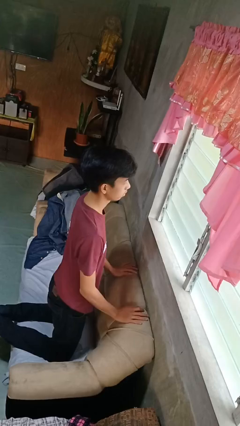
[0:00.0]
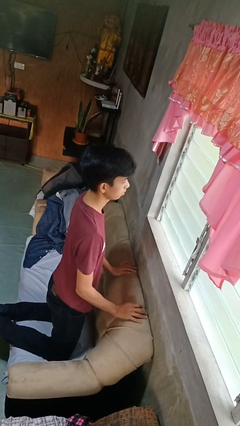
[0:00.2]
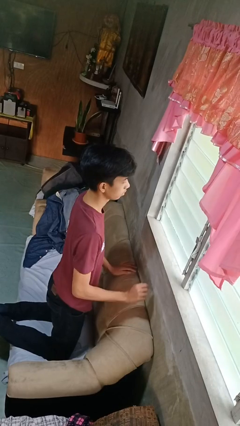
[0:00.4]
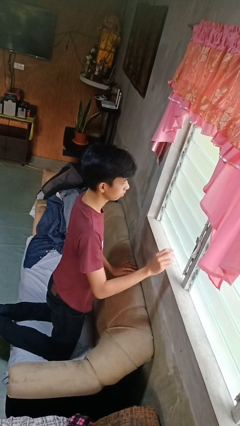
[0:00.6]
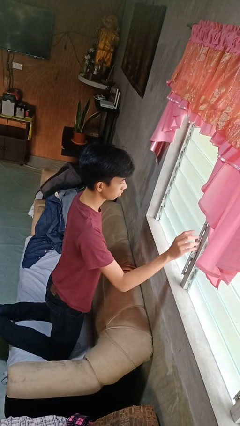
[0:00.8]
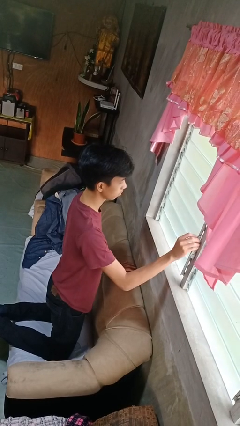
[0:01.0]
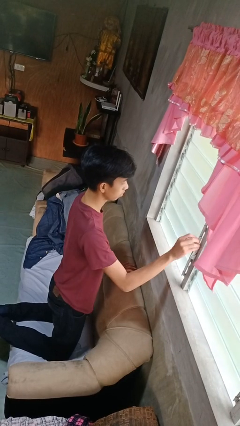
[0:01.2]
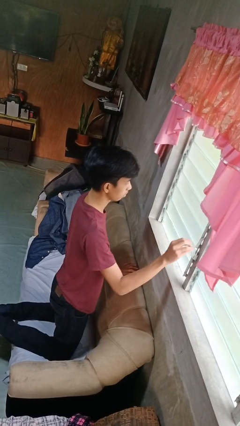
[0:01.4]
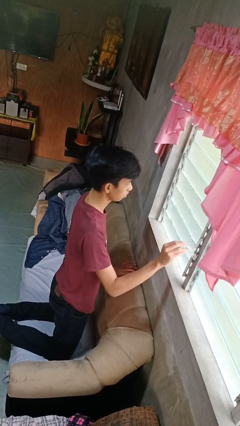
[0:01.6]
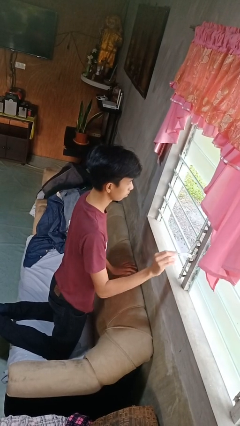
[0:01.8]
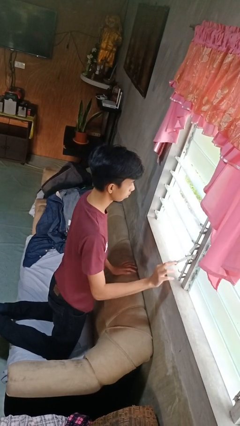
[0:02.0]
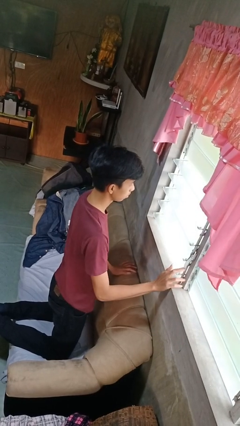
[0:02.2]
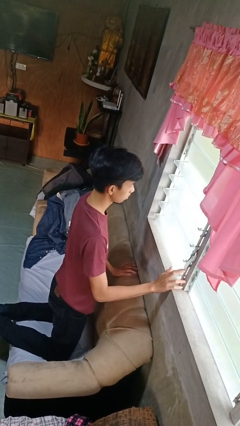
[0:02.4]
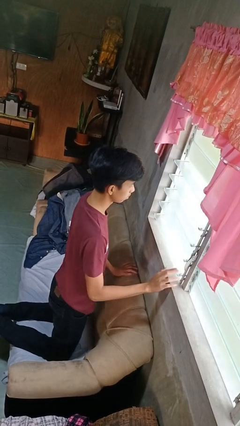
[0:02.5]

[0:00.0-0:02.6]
person opens home window

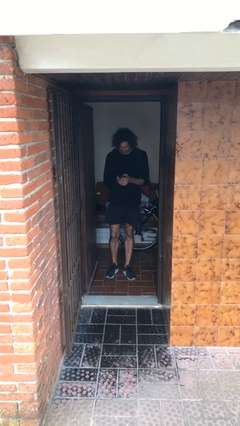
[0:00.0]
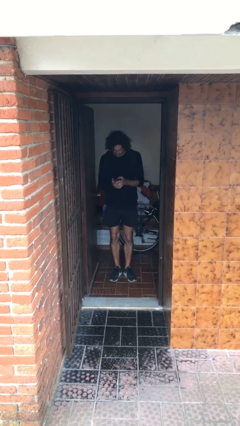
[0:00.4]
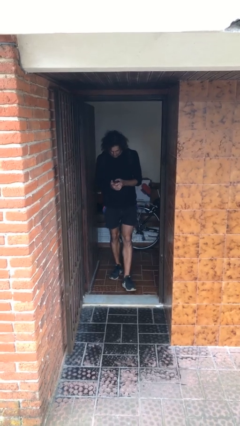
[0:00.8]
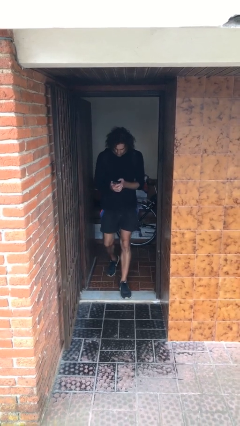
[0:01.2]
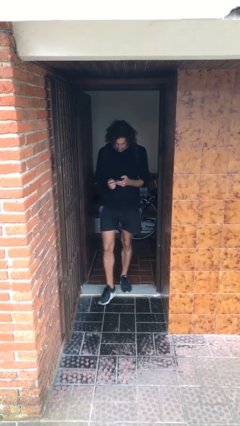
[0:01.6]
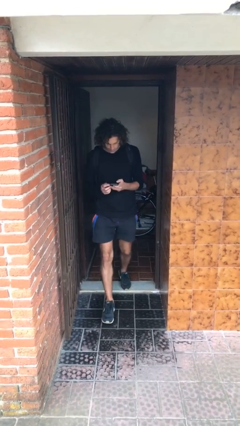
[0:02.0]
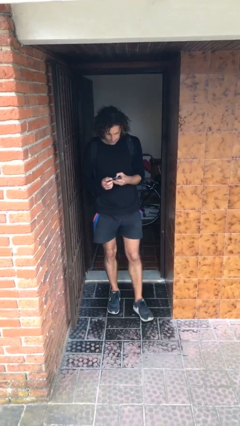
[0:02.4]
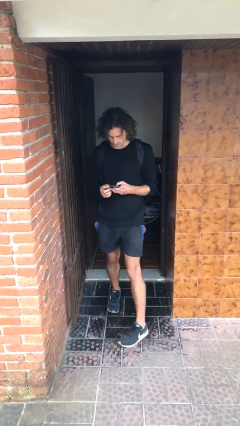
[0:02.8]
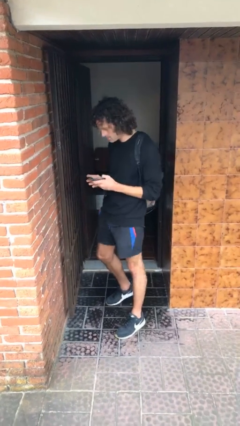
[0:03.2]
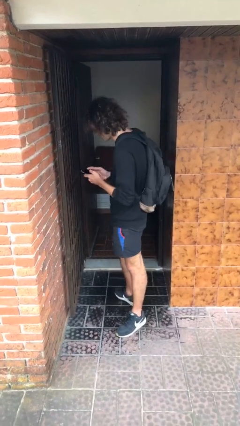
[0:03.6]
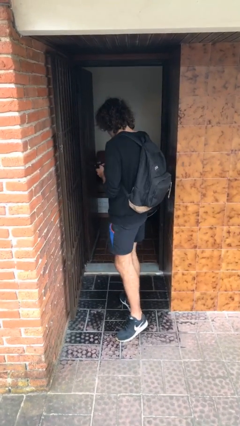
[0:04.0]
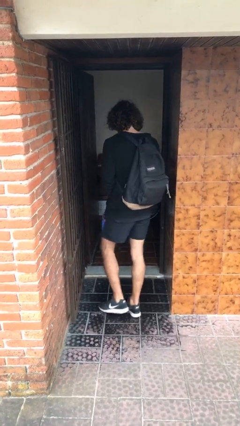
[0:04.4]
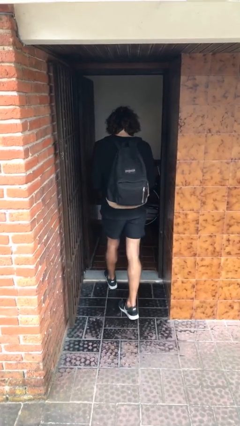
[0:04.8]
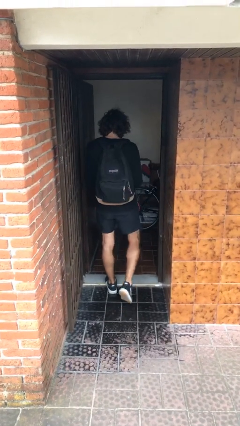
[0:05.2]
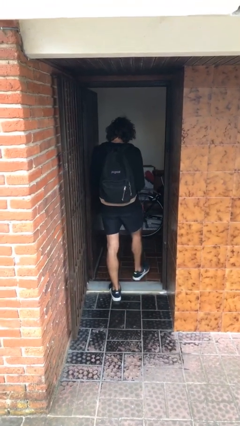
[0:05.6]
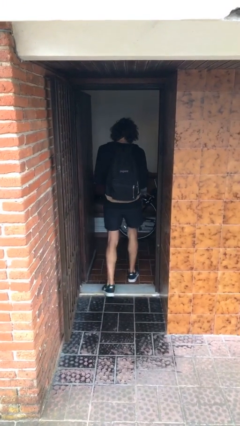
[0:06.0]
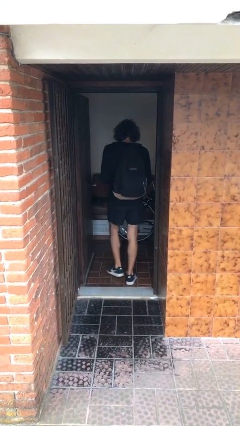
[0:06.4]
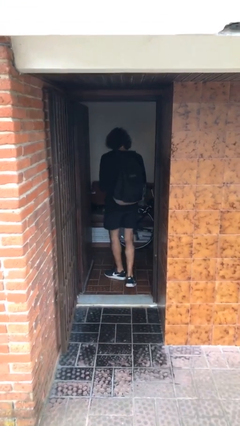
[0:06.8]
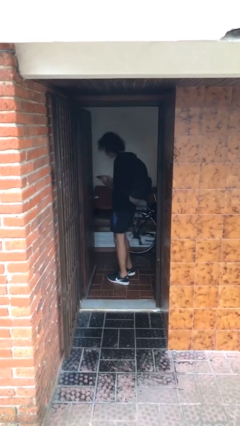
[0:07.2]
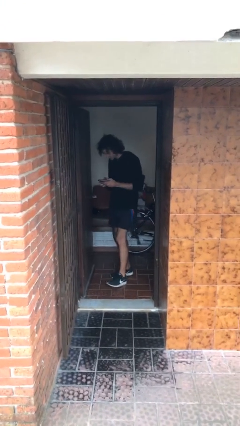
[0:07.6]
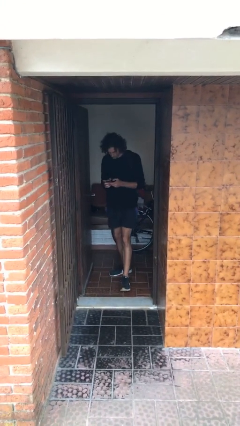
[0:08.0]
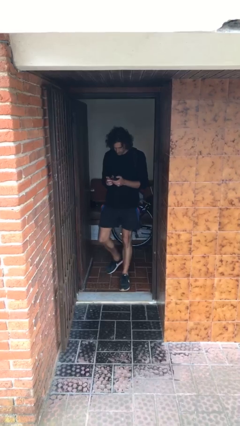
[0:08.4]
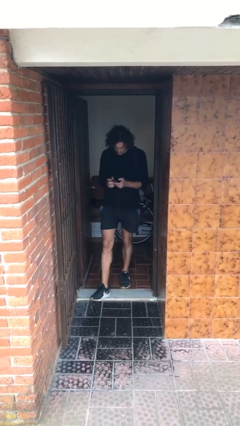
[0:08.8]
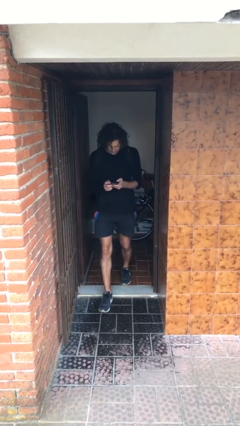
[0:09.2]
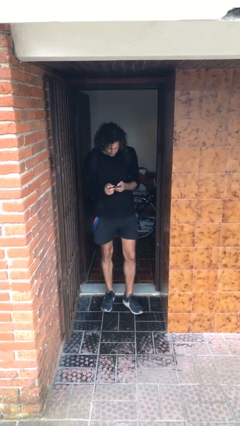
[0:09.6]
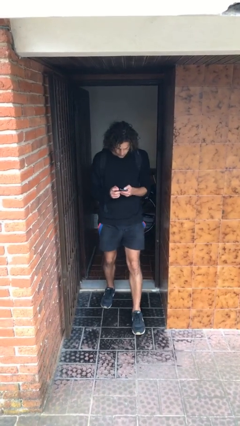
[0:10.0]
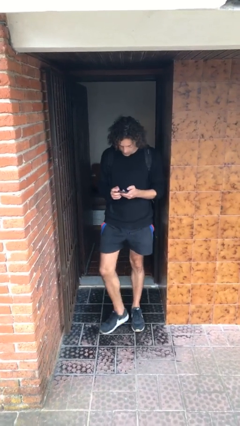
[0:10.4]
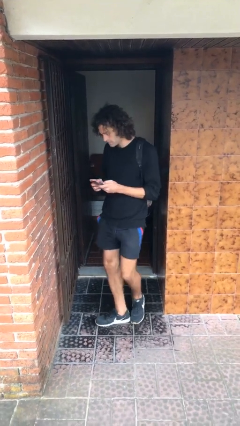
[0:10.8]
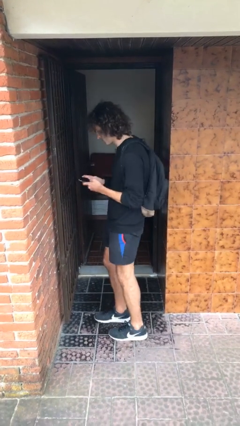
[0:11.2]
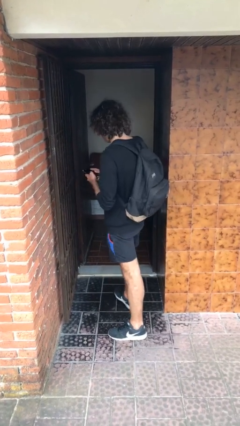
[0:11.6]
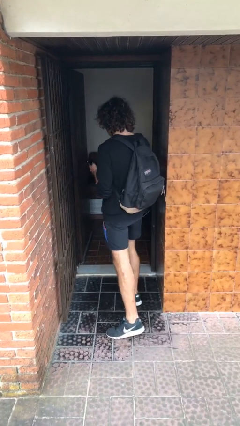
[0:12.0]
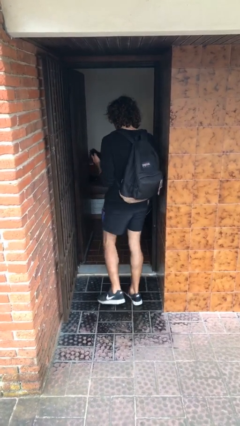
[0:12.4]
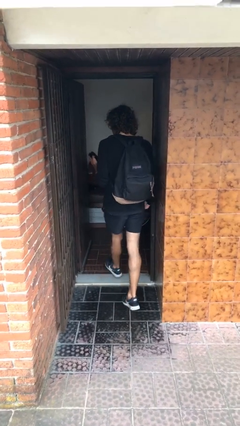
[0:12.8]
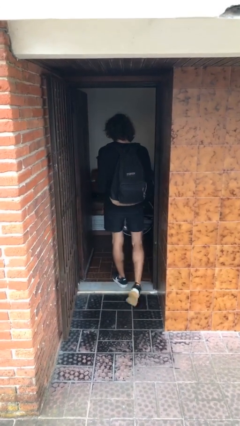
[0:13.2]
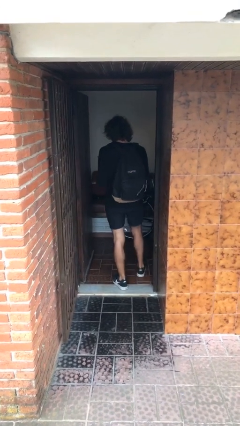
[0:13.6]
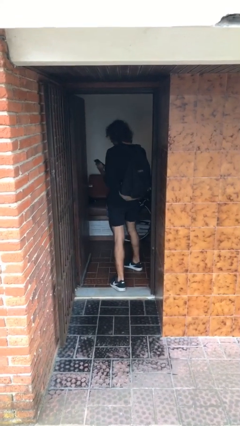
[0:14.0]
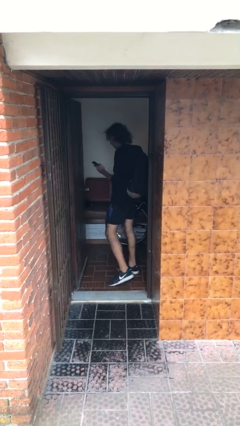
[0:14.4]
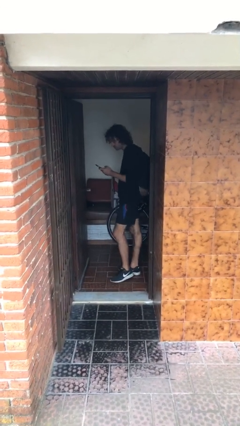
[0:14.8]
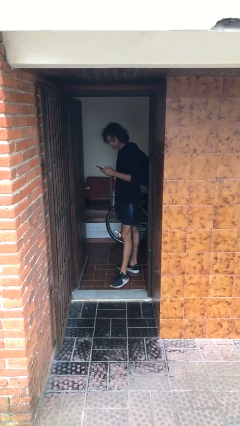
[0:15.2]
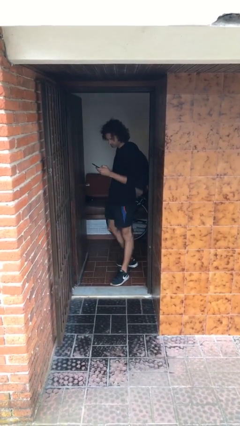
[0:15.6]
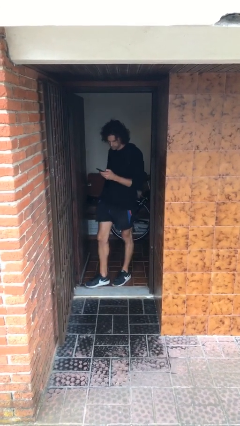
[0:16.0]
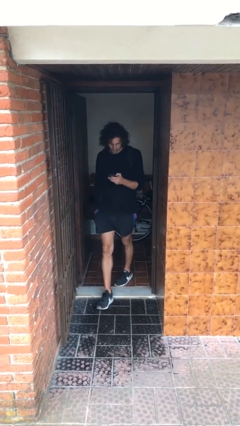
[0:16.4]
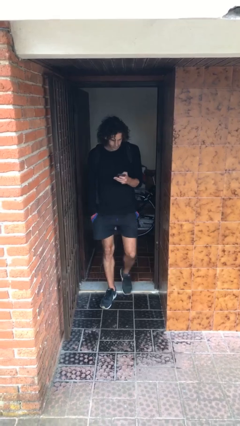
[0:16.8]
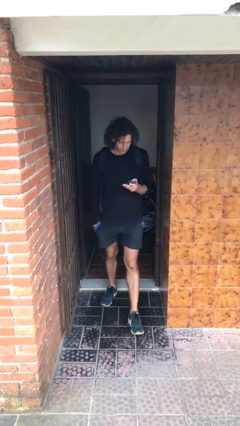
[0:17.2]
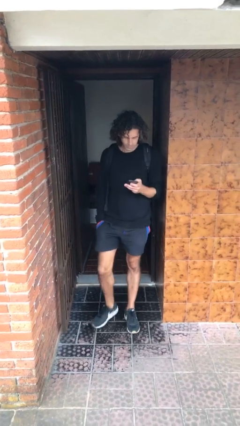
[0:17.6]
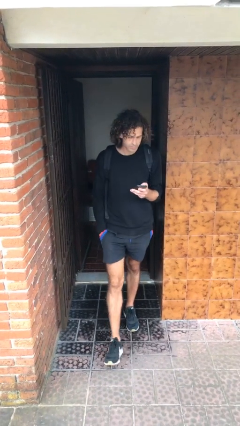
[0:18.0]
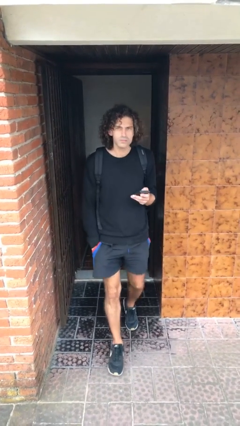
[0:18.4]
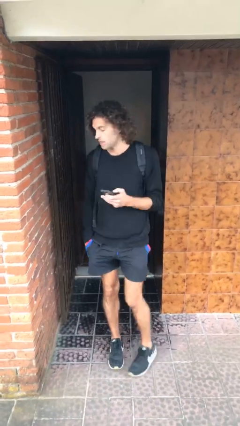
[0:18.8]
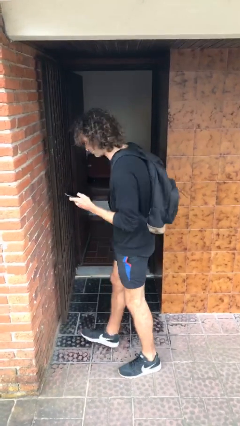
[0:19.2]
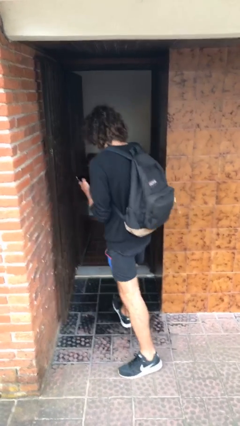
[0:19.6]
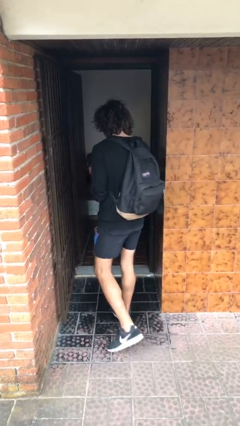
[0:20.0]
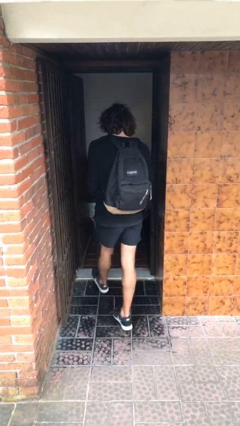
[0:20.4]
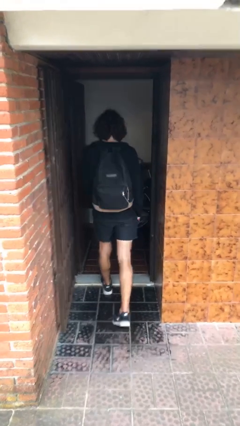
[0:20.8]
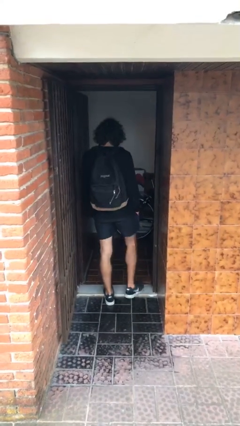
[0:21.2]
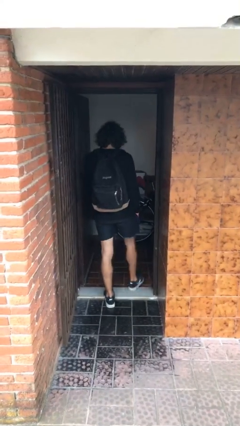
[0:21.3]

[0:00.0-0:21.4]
person texts on phone

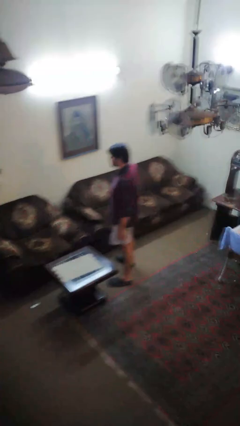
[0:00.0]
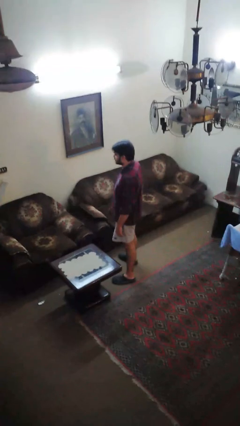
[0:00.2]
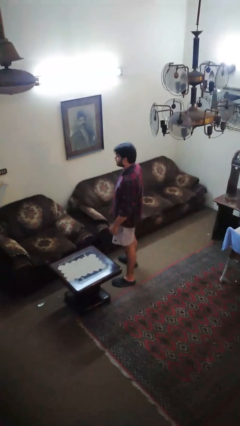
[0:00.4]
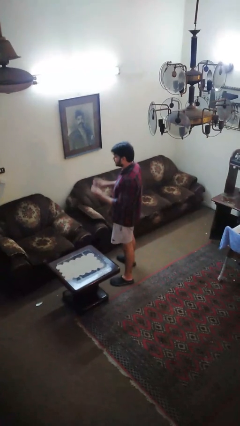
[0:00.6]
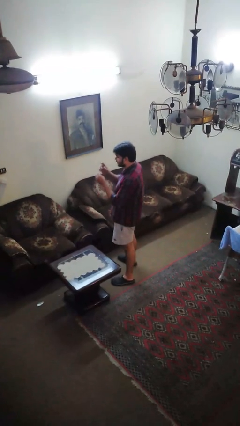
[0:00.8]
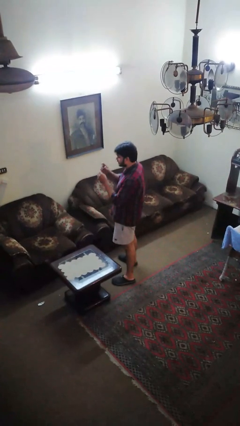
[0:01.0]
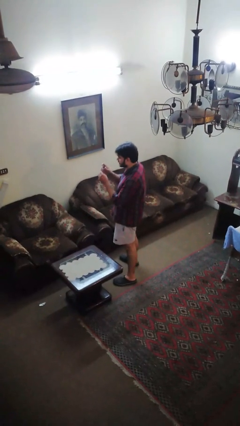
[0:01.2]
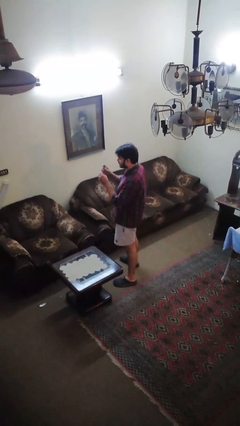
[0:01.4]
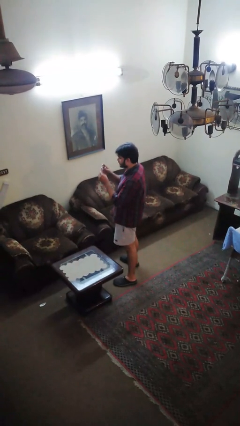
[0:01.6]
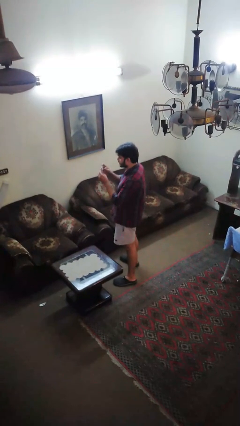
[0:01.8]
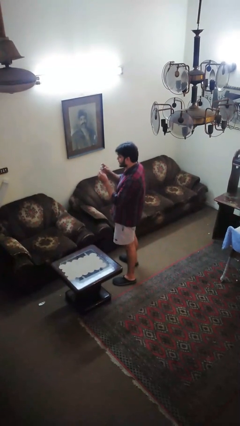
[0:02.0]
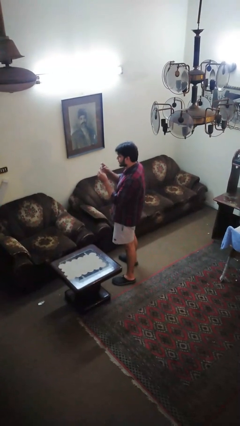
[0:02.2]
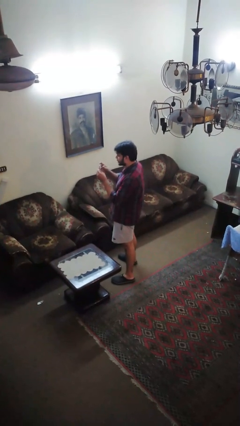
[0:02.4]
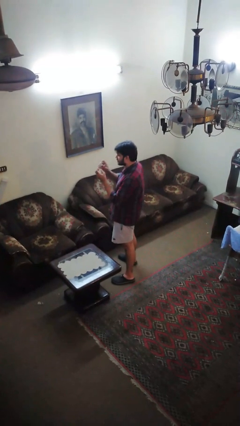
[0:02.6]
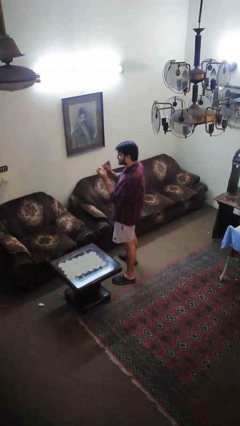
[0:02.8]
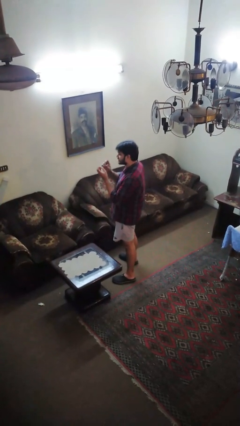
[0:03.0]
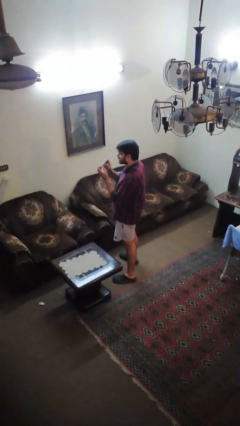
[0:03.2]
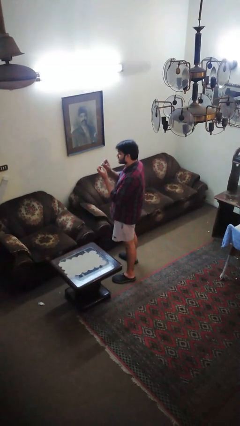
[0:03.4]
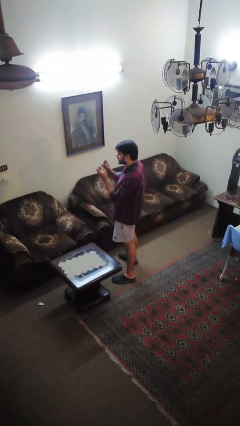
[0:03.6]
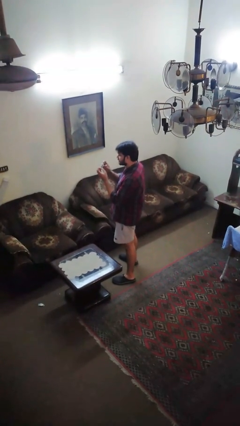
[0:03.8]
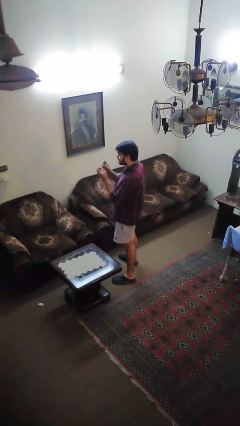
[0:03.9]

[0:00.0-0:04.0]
person clips fingernails

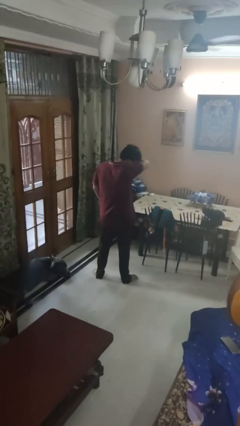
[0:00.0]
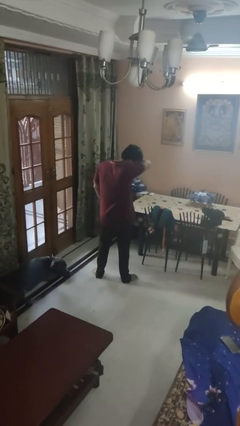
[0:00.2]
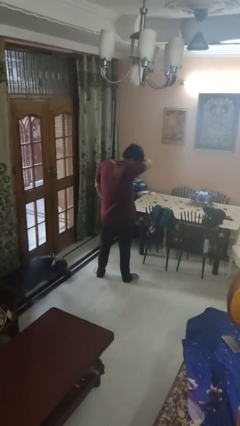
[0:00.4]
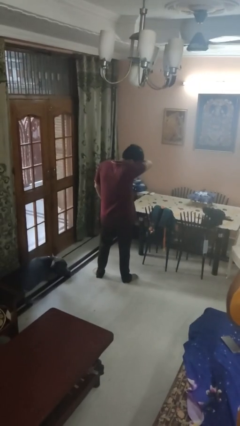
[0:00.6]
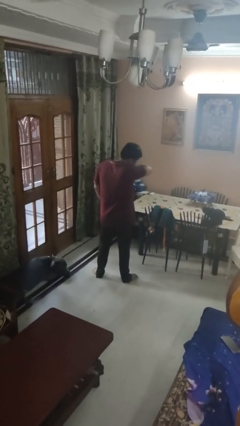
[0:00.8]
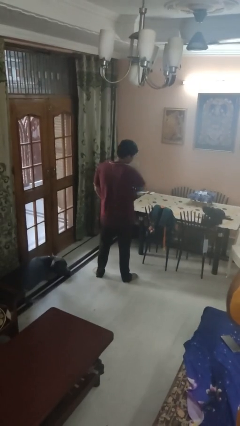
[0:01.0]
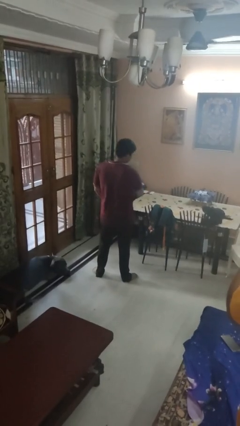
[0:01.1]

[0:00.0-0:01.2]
person sneezes into arm
